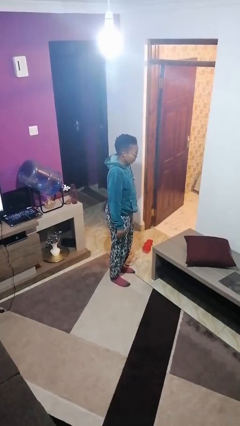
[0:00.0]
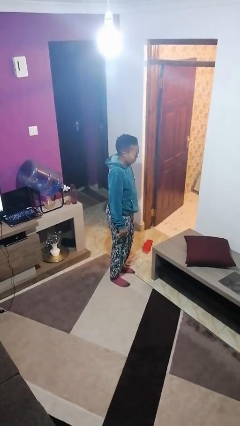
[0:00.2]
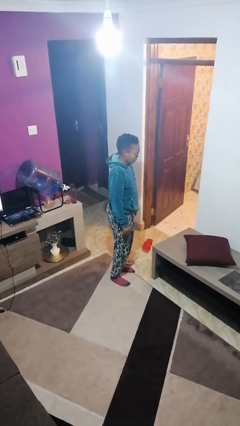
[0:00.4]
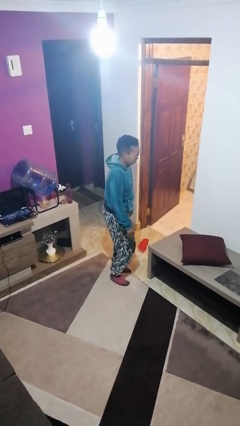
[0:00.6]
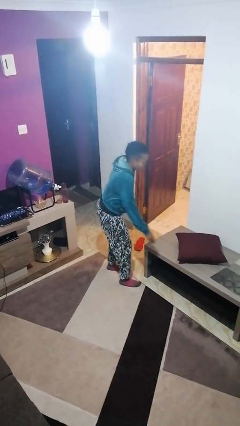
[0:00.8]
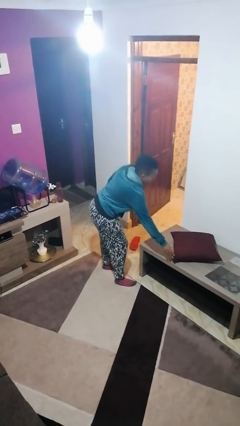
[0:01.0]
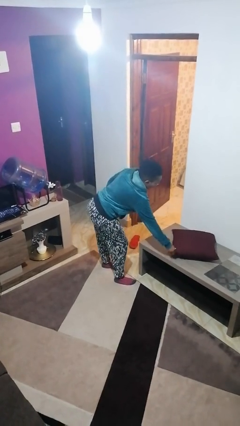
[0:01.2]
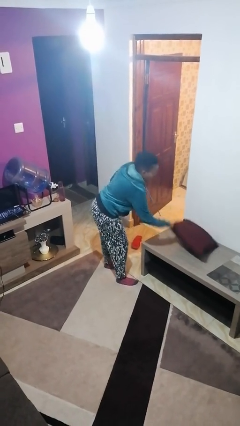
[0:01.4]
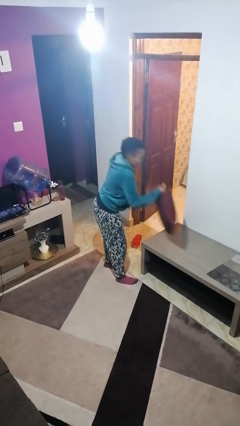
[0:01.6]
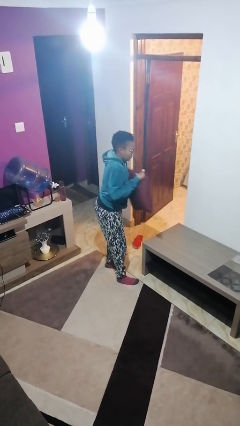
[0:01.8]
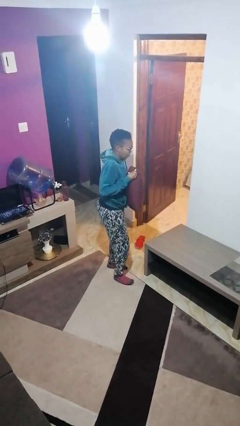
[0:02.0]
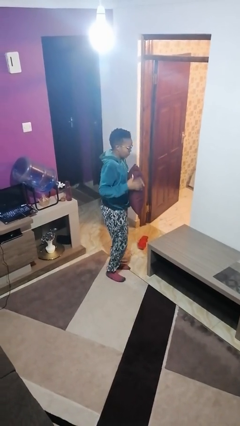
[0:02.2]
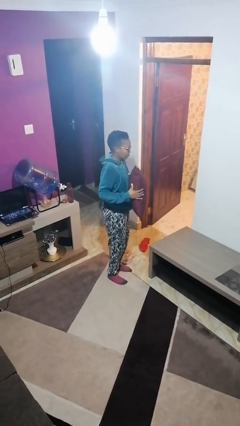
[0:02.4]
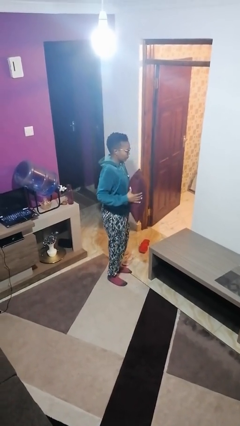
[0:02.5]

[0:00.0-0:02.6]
person picks up object from table

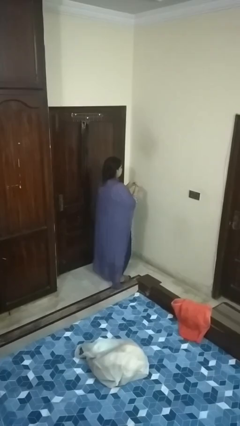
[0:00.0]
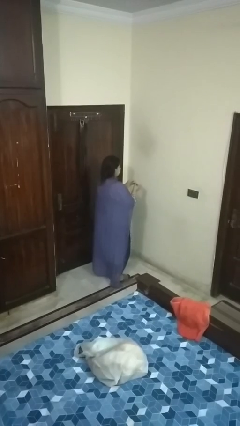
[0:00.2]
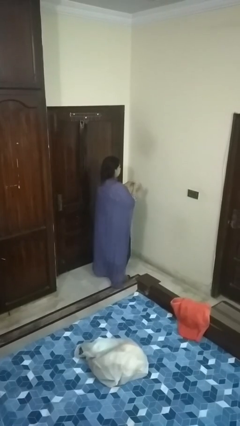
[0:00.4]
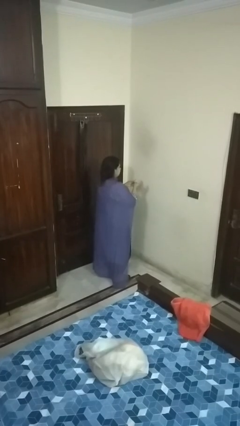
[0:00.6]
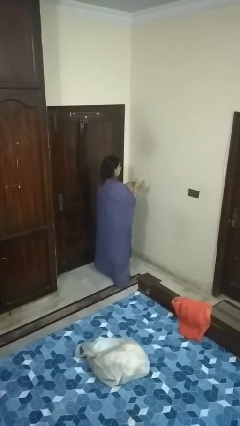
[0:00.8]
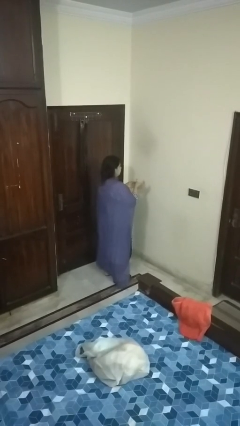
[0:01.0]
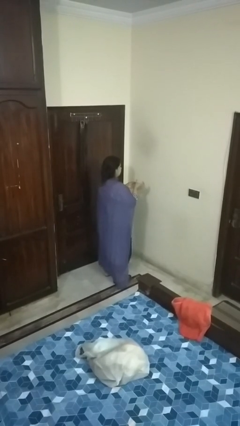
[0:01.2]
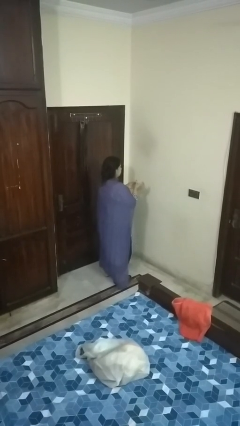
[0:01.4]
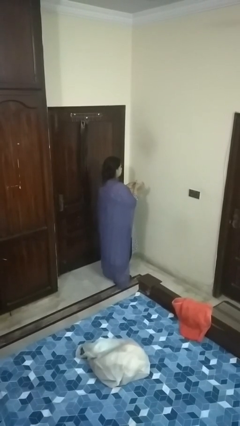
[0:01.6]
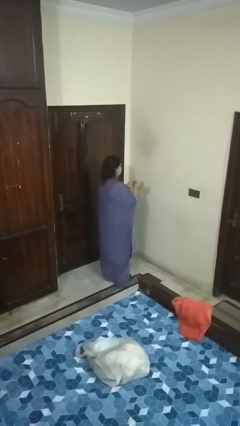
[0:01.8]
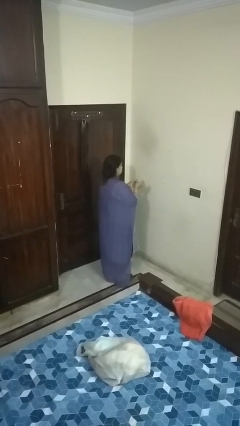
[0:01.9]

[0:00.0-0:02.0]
person puts on ring

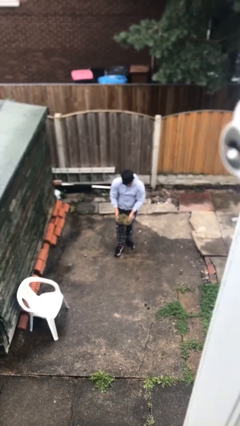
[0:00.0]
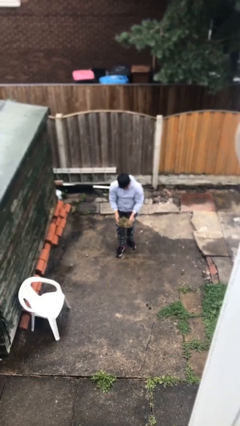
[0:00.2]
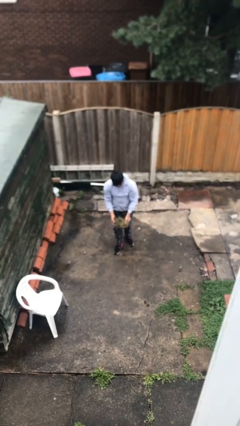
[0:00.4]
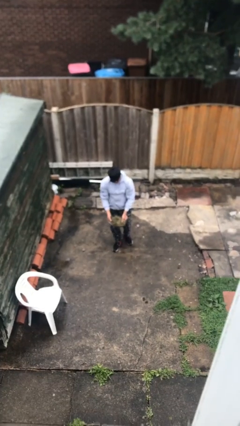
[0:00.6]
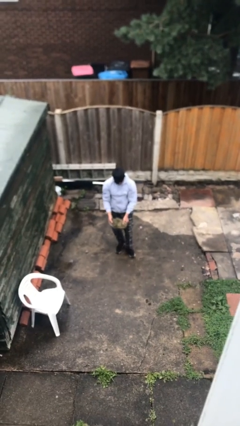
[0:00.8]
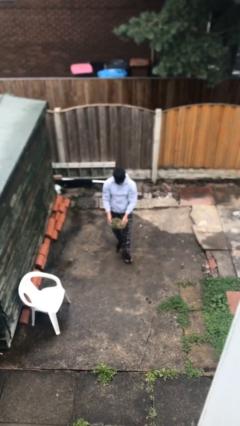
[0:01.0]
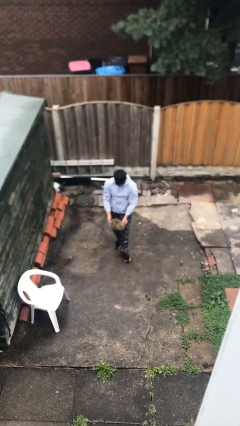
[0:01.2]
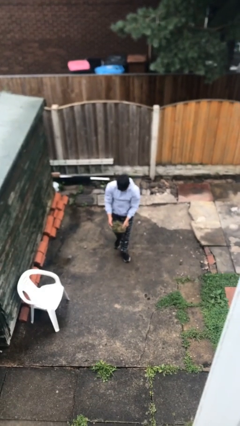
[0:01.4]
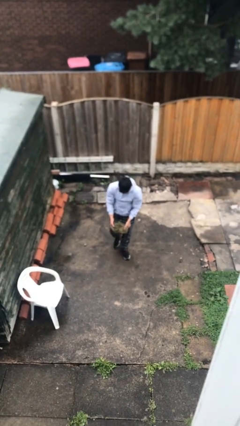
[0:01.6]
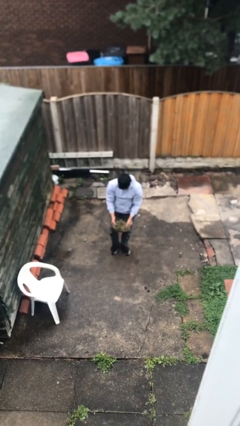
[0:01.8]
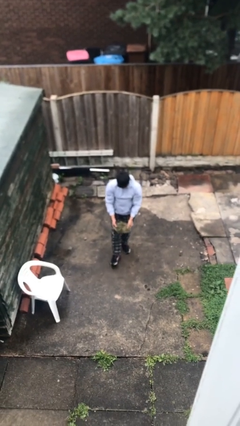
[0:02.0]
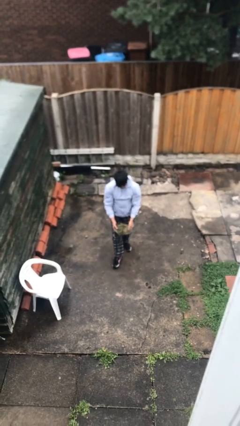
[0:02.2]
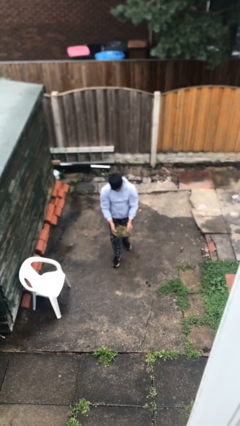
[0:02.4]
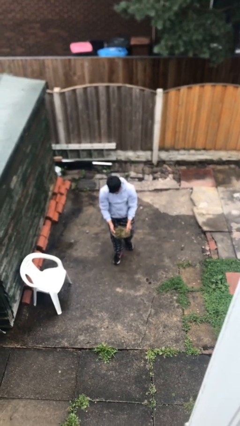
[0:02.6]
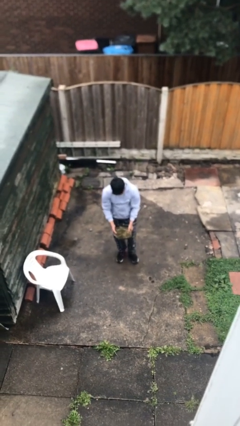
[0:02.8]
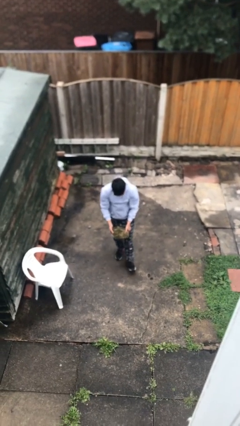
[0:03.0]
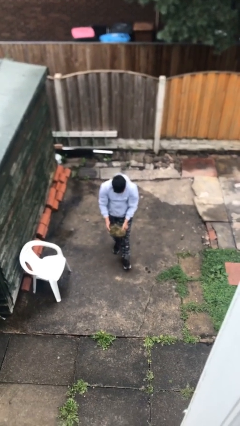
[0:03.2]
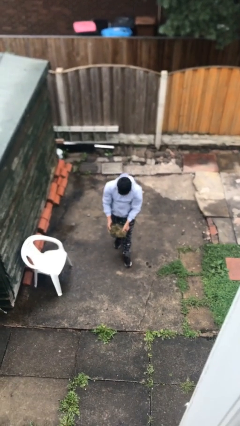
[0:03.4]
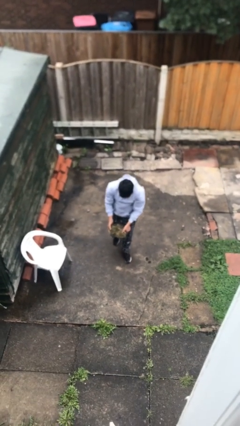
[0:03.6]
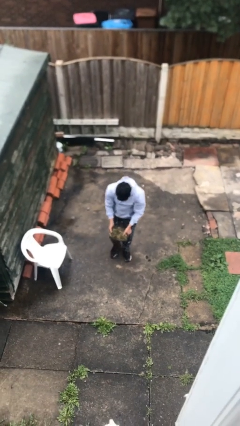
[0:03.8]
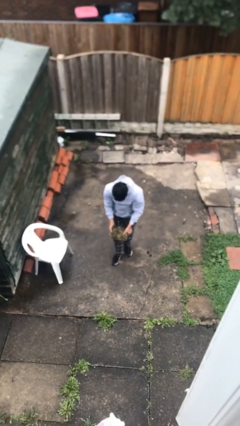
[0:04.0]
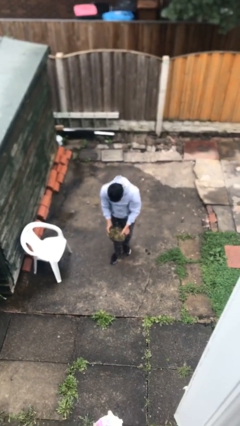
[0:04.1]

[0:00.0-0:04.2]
person carries heavy object

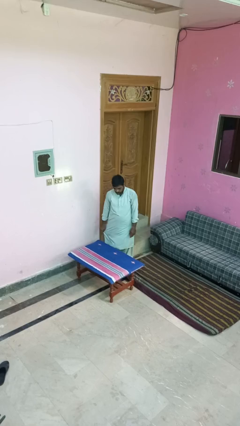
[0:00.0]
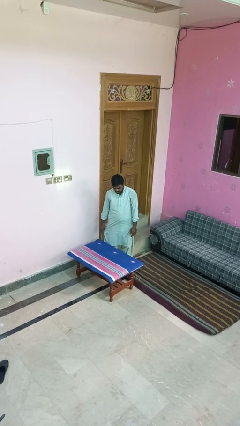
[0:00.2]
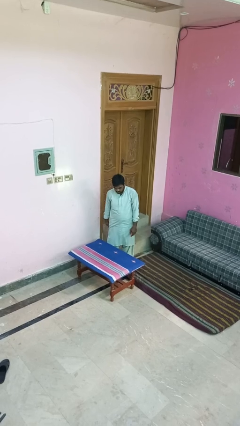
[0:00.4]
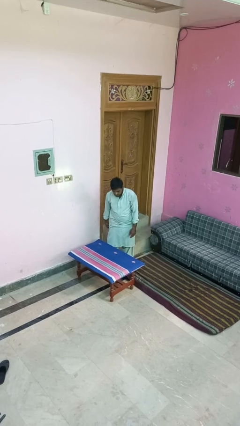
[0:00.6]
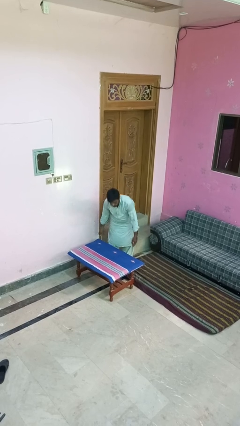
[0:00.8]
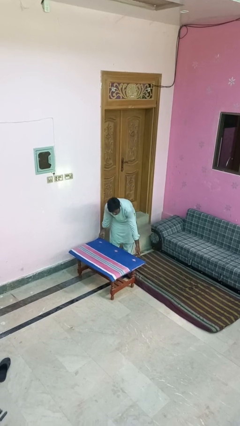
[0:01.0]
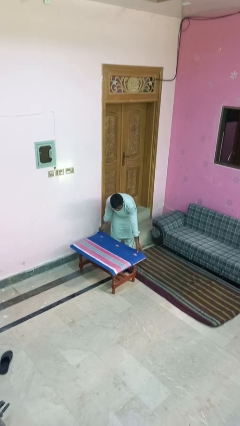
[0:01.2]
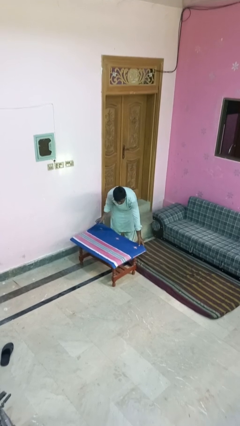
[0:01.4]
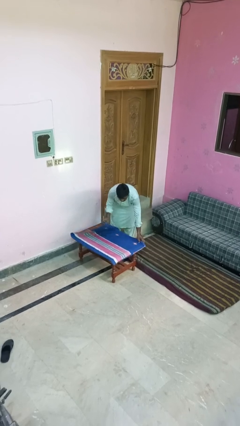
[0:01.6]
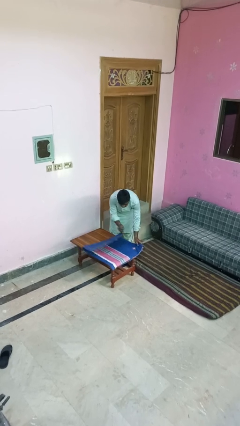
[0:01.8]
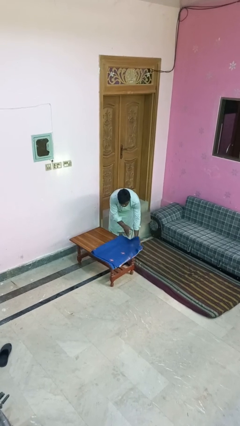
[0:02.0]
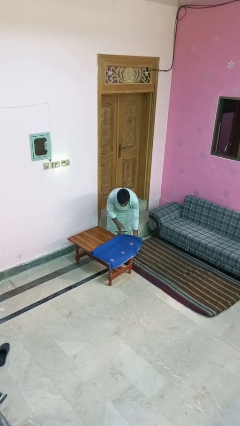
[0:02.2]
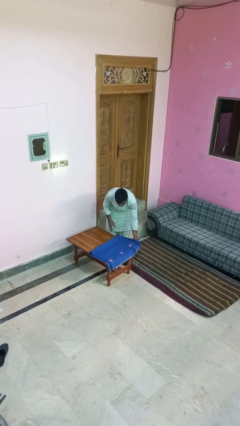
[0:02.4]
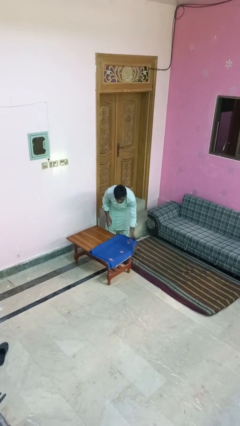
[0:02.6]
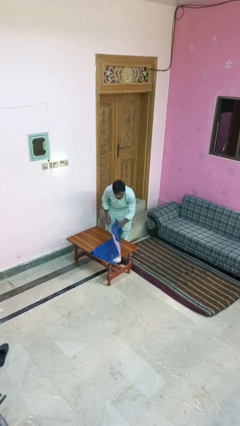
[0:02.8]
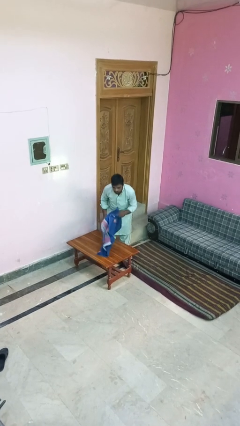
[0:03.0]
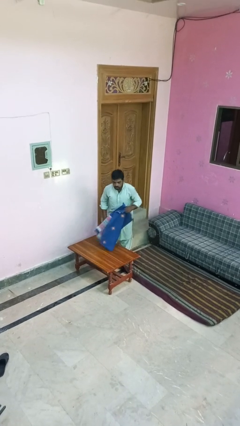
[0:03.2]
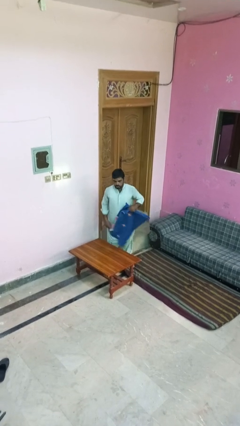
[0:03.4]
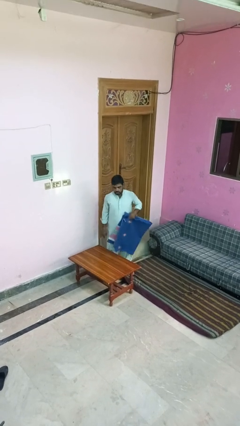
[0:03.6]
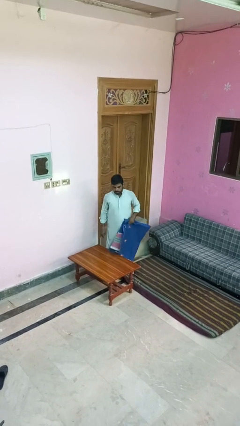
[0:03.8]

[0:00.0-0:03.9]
person folds tablecloth

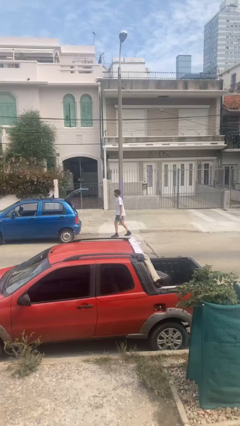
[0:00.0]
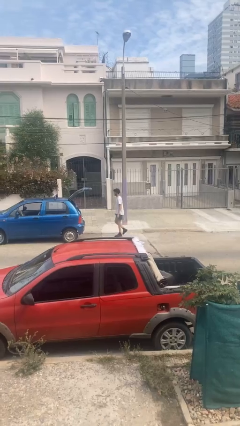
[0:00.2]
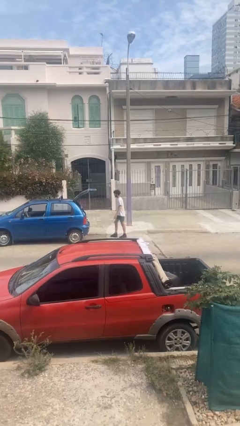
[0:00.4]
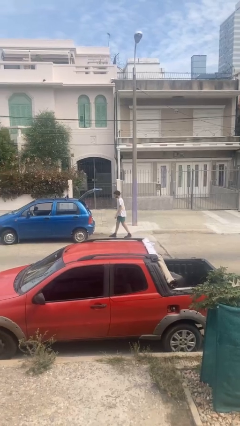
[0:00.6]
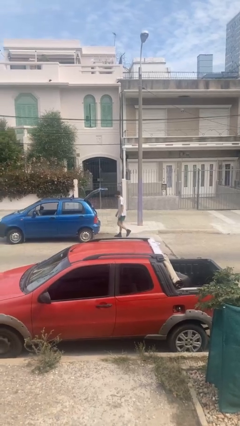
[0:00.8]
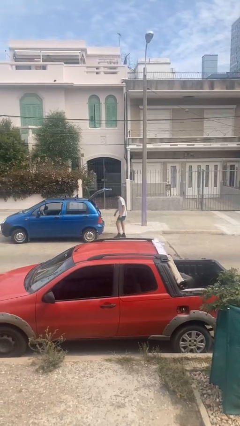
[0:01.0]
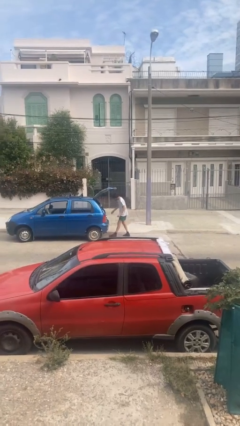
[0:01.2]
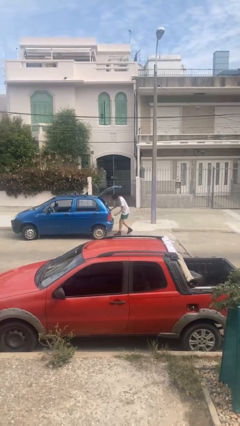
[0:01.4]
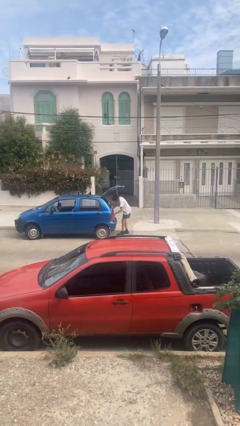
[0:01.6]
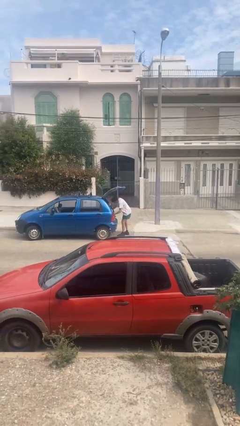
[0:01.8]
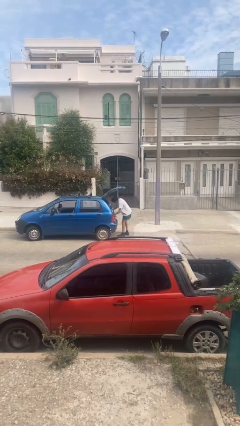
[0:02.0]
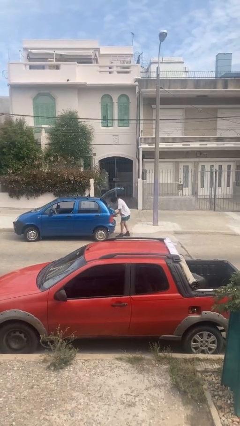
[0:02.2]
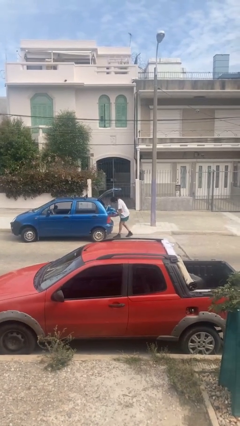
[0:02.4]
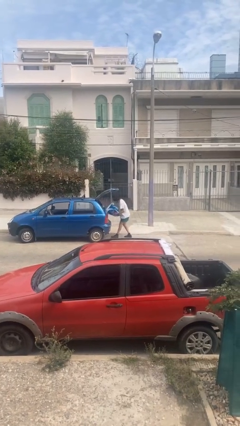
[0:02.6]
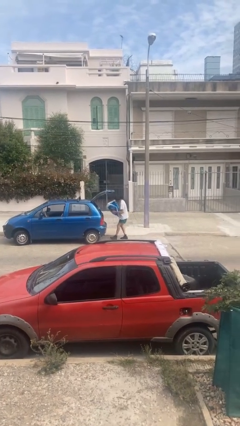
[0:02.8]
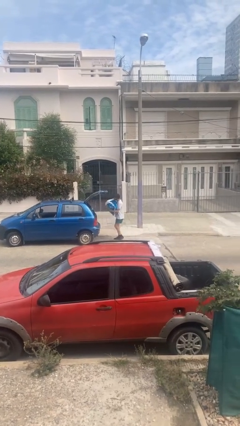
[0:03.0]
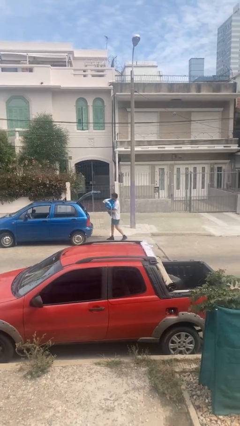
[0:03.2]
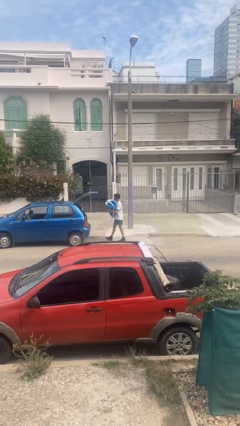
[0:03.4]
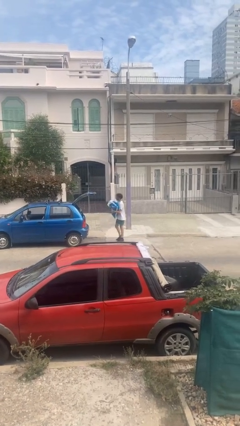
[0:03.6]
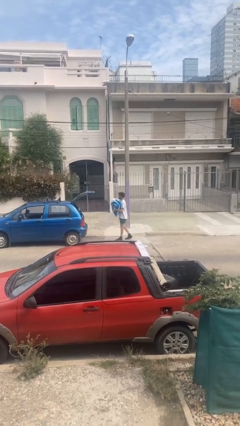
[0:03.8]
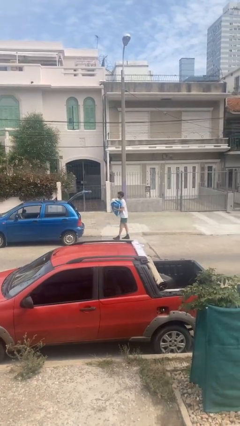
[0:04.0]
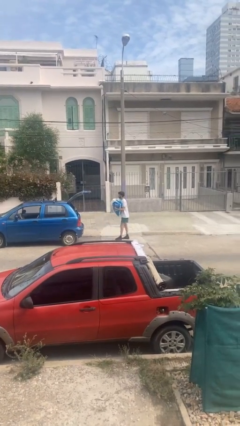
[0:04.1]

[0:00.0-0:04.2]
person unloads car

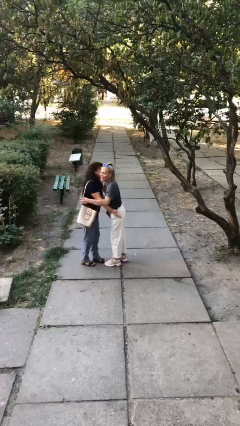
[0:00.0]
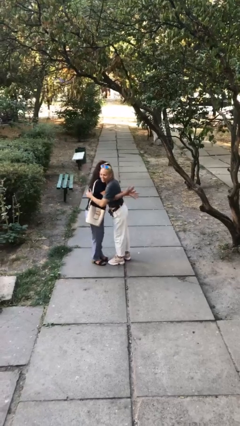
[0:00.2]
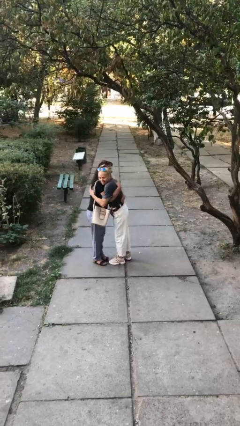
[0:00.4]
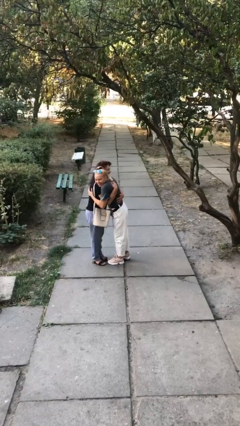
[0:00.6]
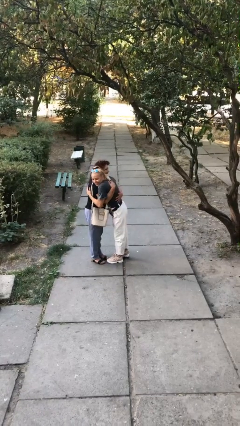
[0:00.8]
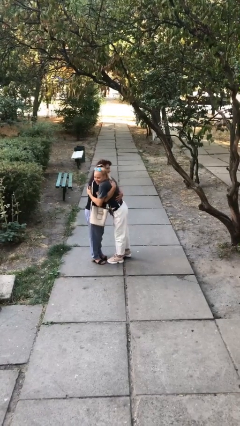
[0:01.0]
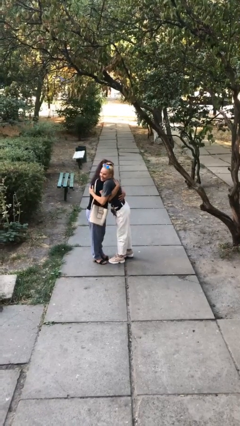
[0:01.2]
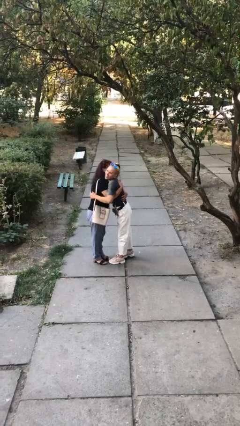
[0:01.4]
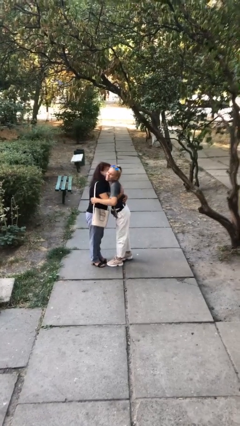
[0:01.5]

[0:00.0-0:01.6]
person embraces person
